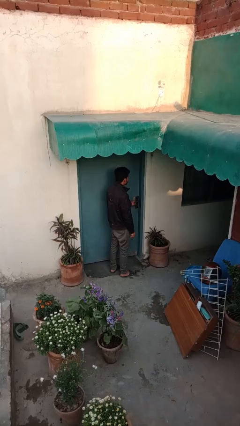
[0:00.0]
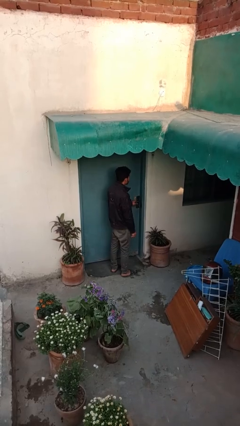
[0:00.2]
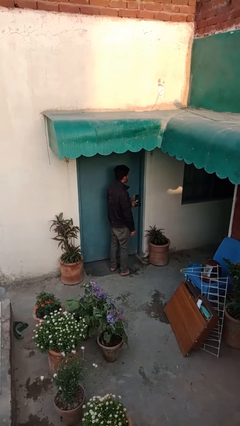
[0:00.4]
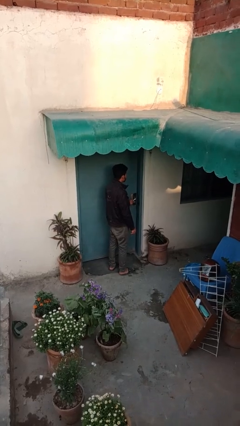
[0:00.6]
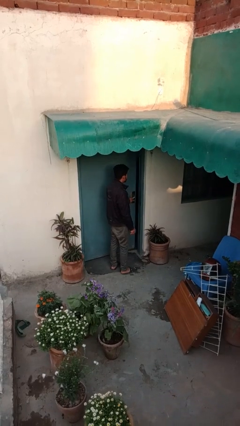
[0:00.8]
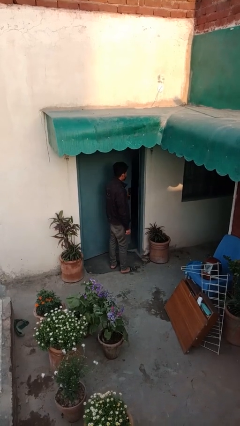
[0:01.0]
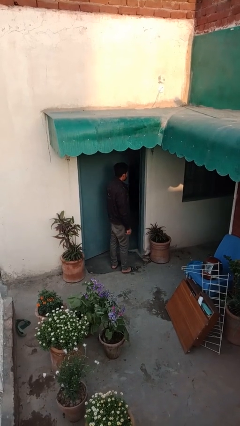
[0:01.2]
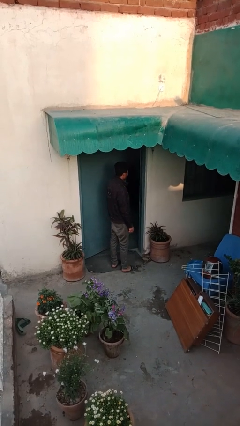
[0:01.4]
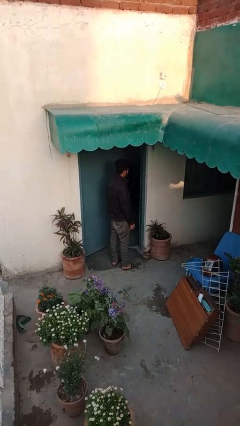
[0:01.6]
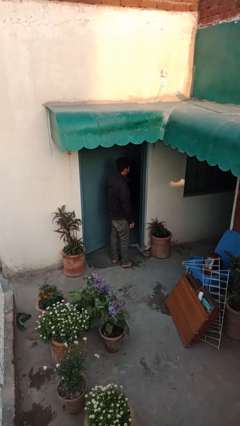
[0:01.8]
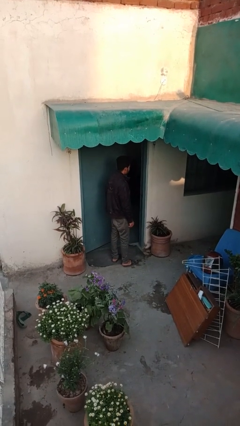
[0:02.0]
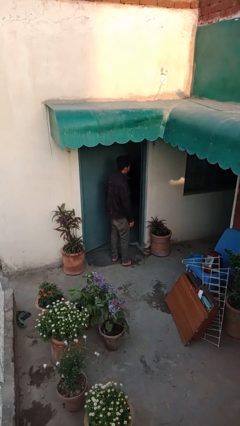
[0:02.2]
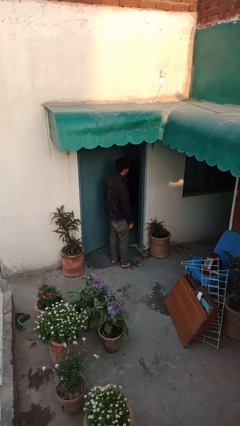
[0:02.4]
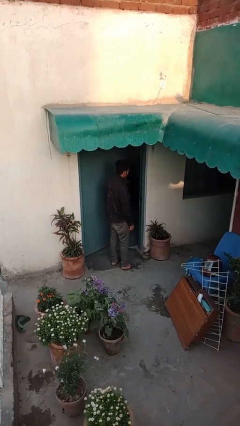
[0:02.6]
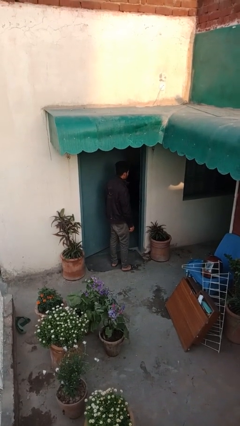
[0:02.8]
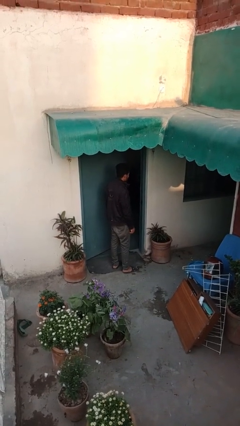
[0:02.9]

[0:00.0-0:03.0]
person opens facility door

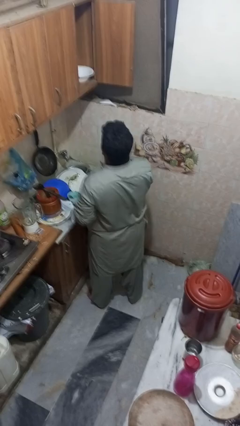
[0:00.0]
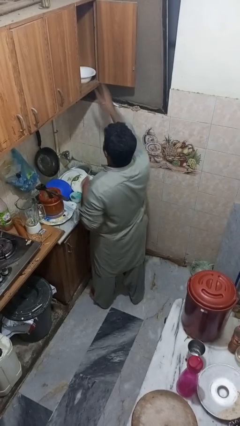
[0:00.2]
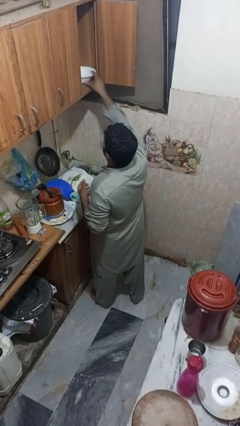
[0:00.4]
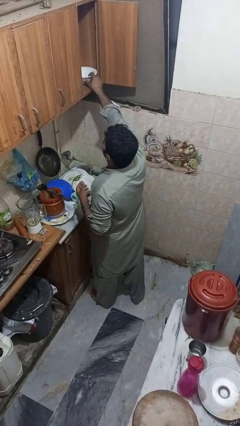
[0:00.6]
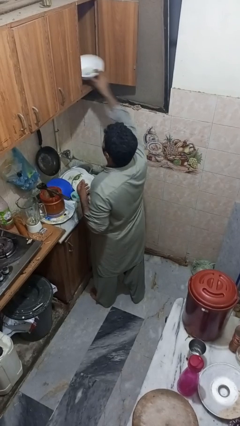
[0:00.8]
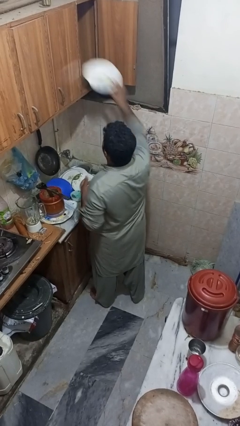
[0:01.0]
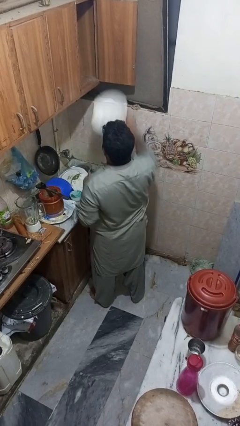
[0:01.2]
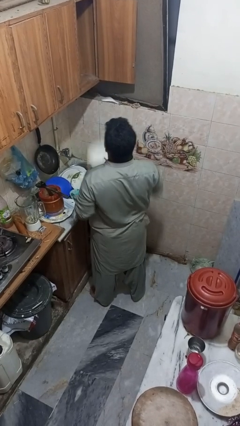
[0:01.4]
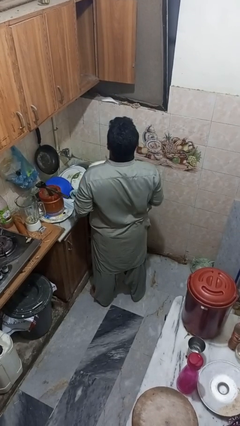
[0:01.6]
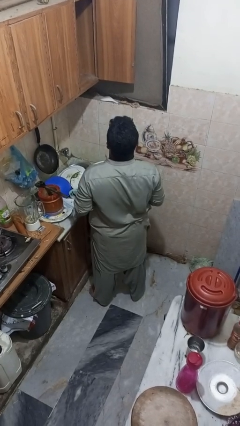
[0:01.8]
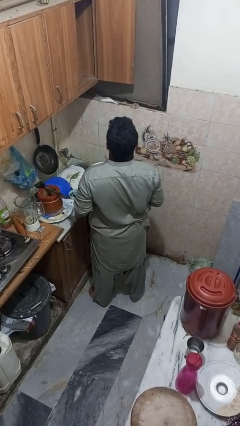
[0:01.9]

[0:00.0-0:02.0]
person takes object from cabinet

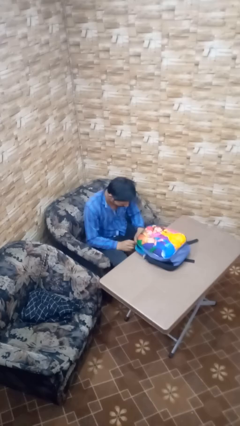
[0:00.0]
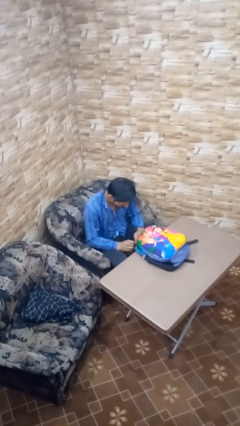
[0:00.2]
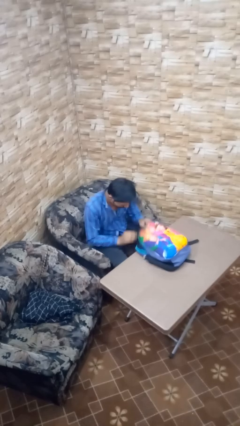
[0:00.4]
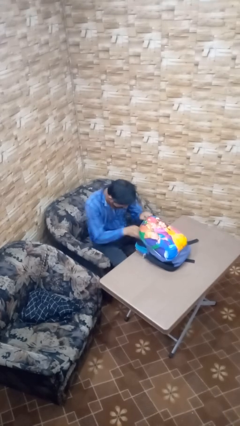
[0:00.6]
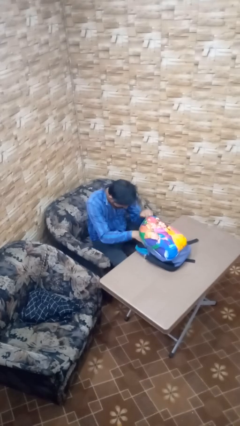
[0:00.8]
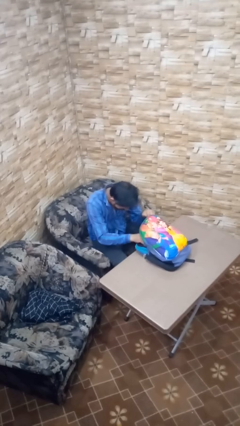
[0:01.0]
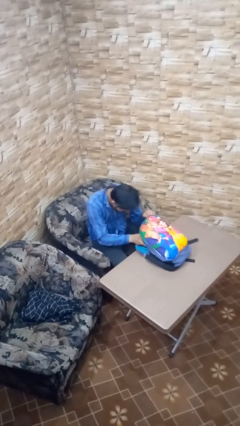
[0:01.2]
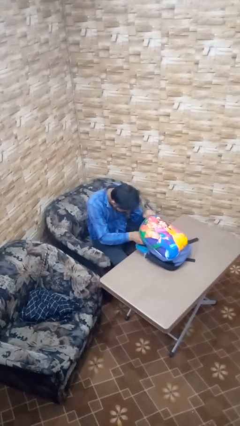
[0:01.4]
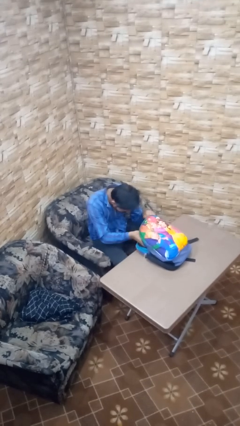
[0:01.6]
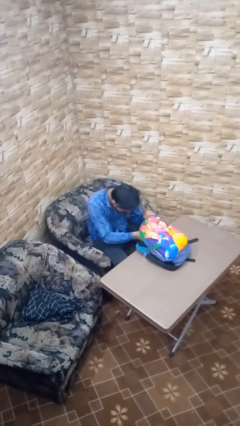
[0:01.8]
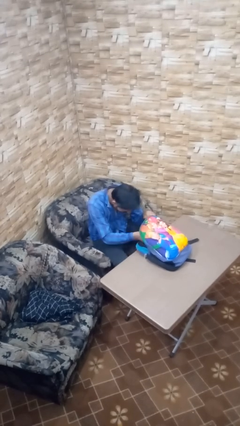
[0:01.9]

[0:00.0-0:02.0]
person searches in backpack

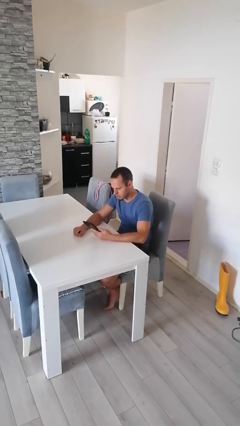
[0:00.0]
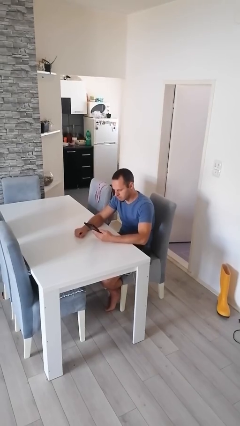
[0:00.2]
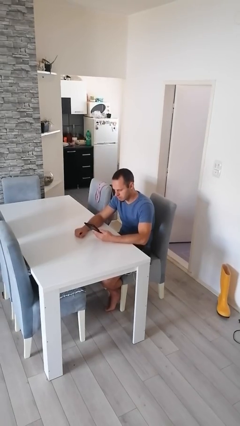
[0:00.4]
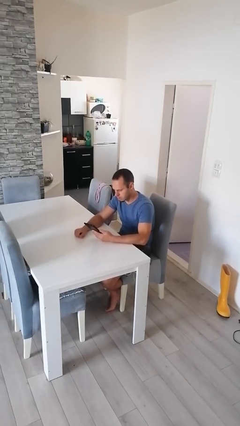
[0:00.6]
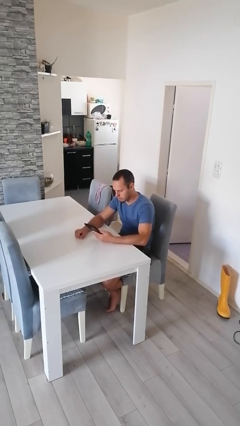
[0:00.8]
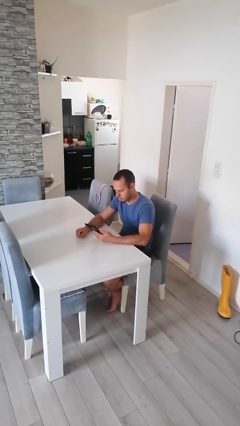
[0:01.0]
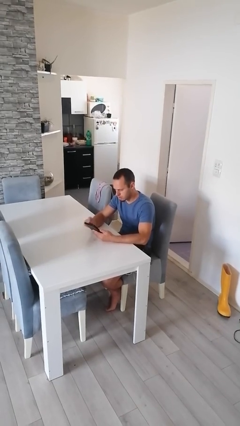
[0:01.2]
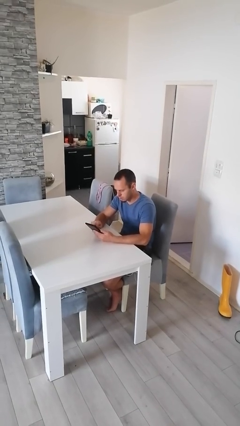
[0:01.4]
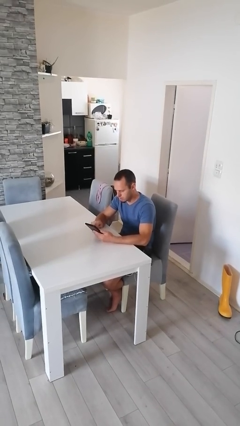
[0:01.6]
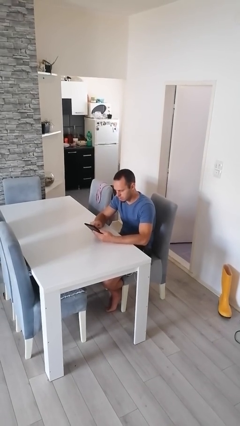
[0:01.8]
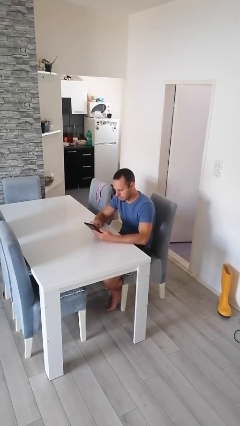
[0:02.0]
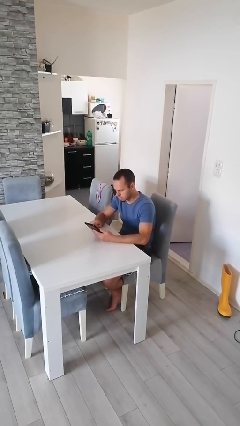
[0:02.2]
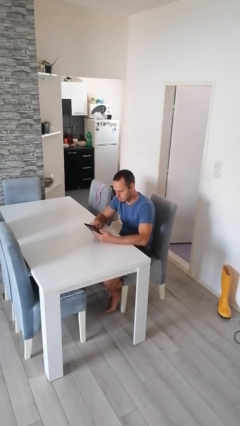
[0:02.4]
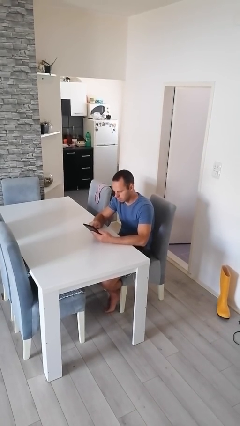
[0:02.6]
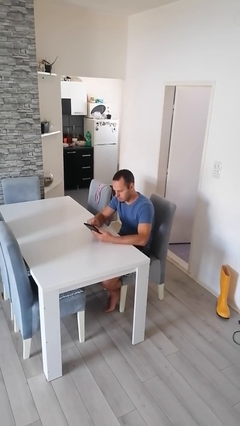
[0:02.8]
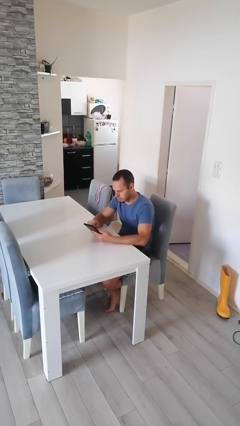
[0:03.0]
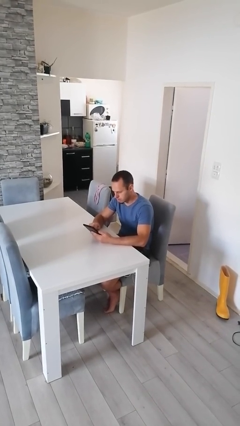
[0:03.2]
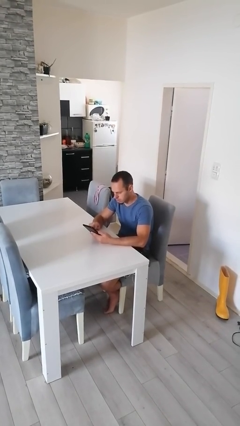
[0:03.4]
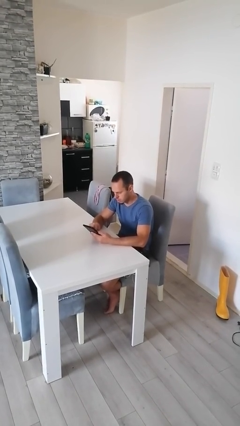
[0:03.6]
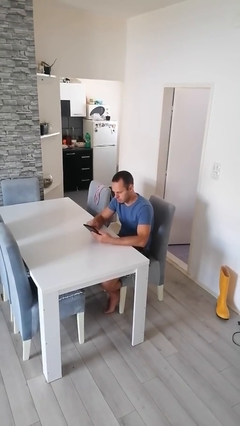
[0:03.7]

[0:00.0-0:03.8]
person interacts with tablet

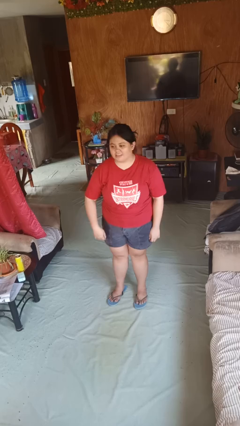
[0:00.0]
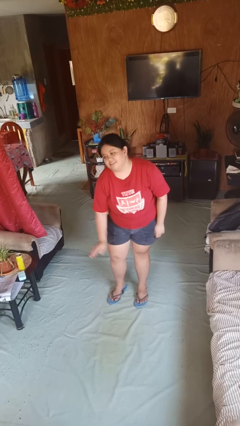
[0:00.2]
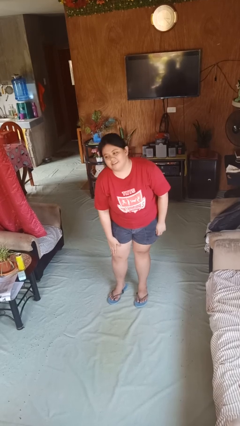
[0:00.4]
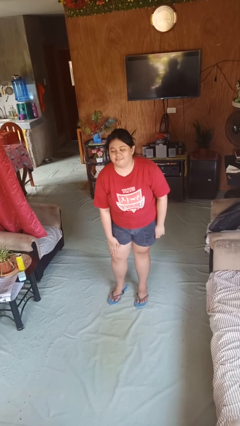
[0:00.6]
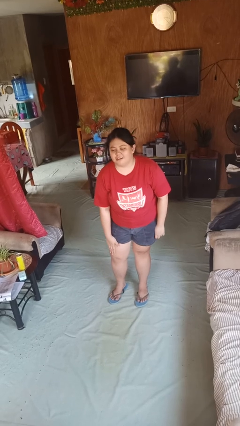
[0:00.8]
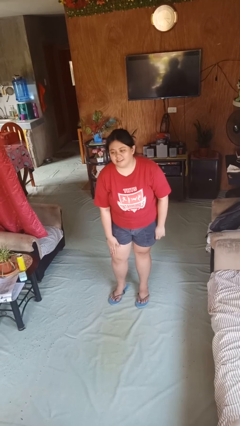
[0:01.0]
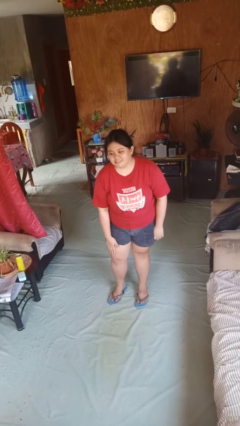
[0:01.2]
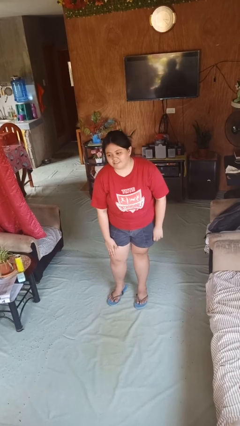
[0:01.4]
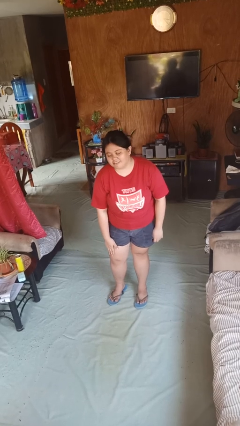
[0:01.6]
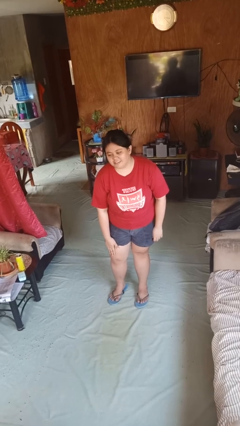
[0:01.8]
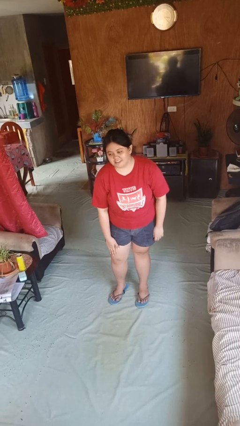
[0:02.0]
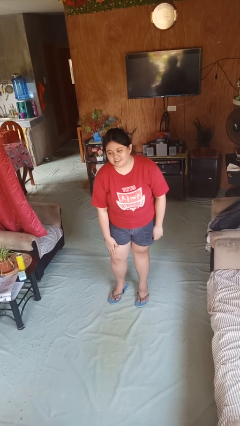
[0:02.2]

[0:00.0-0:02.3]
person swats bug

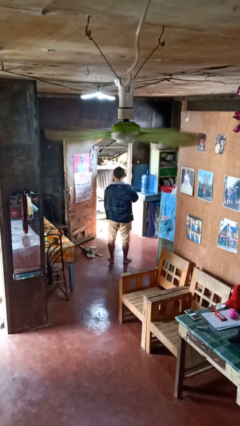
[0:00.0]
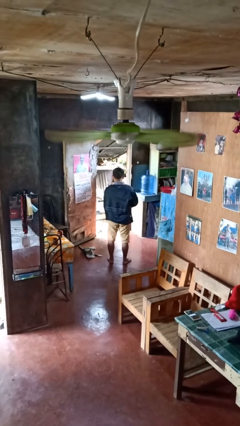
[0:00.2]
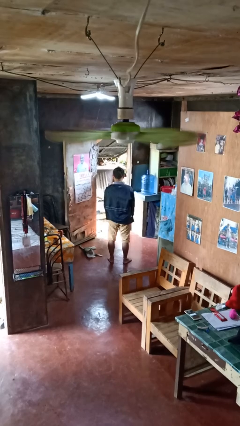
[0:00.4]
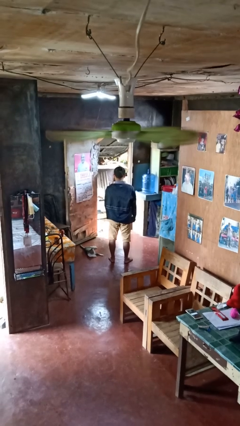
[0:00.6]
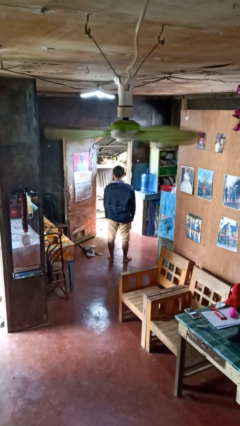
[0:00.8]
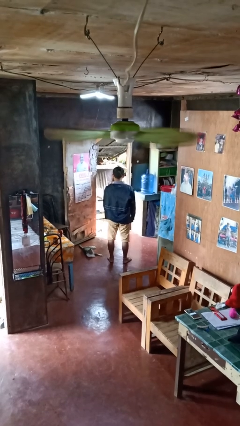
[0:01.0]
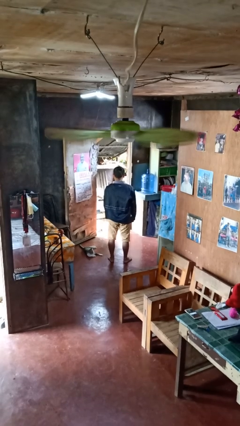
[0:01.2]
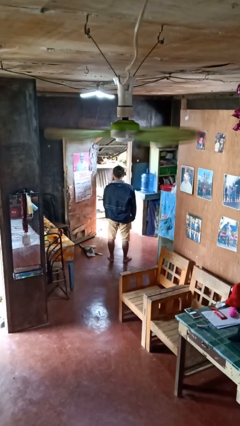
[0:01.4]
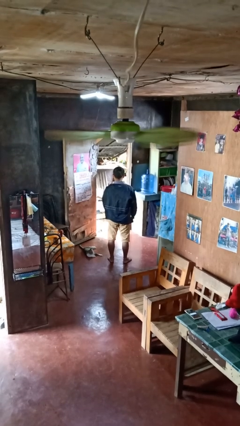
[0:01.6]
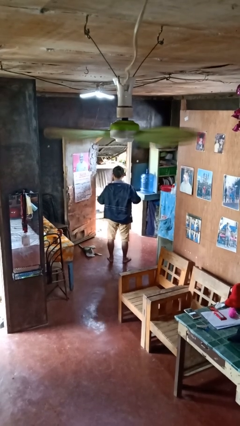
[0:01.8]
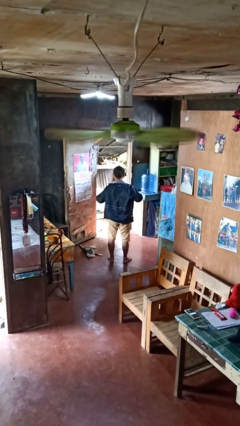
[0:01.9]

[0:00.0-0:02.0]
person unzips jacket

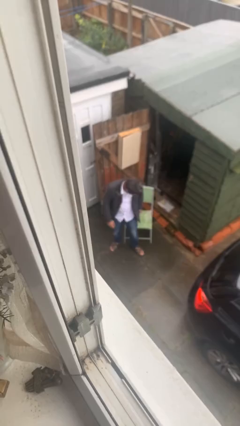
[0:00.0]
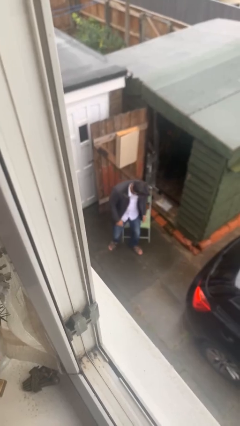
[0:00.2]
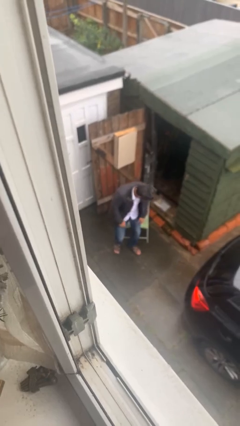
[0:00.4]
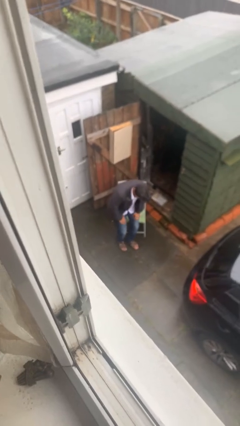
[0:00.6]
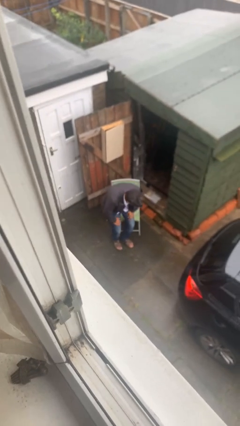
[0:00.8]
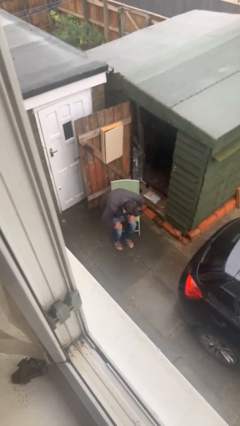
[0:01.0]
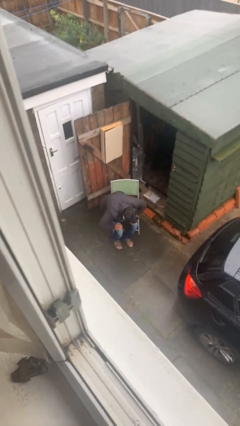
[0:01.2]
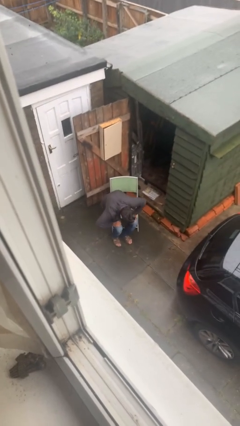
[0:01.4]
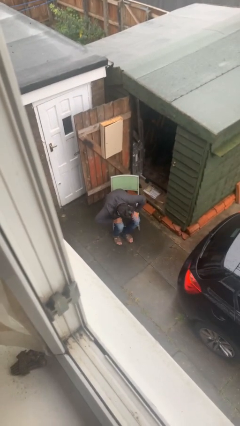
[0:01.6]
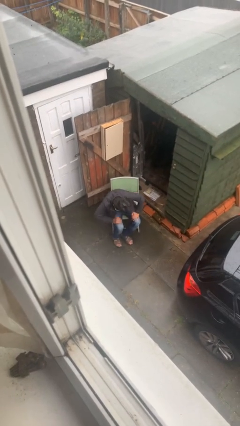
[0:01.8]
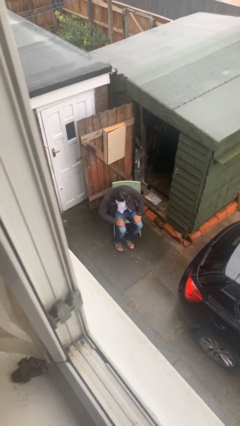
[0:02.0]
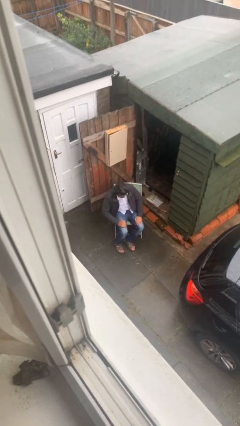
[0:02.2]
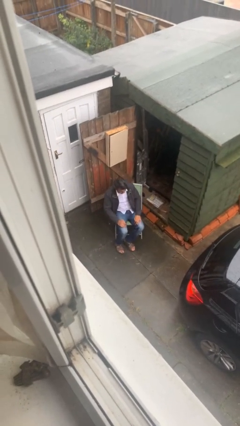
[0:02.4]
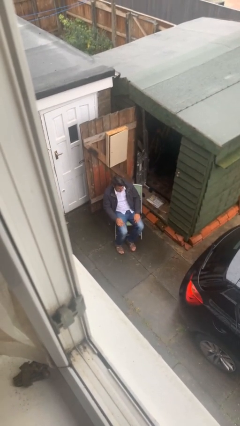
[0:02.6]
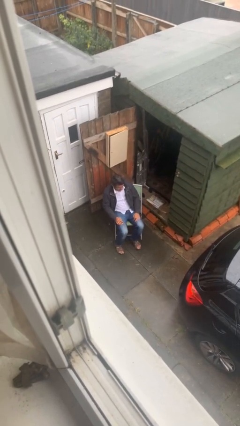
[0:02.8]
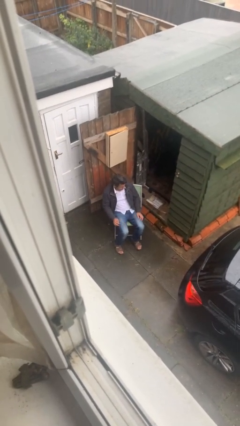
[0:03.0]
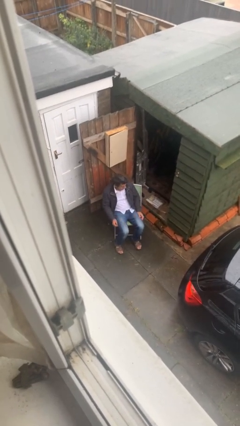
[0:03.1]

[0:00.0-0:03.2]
person sits down
